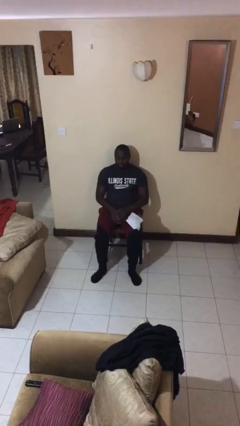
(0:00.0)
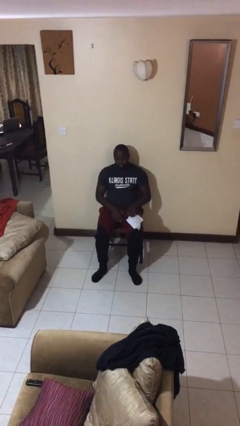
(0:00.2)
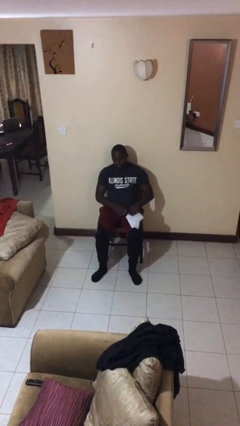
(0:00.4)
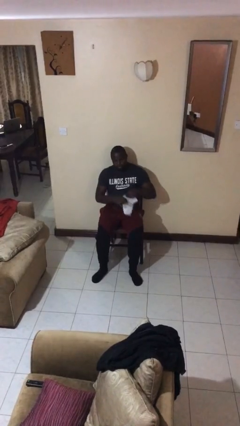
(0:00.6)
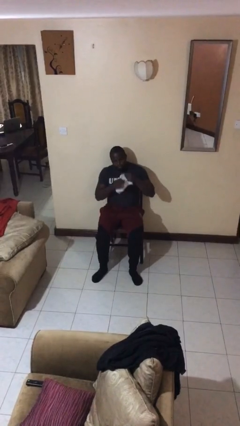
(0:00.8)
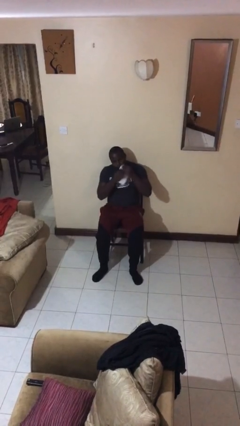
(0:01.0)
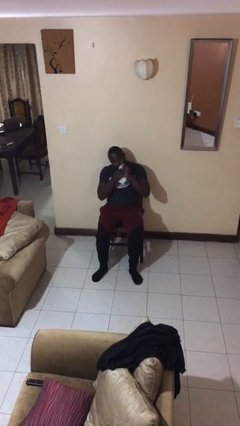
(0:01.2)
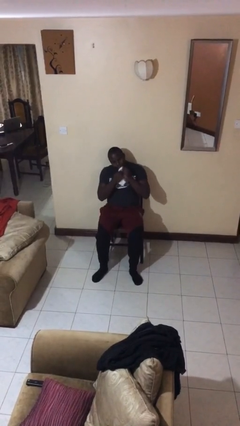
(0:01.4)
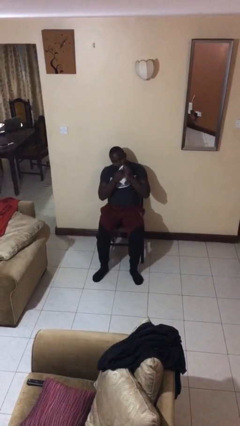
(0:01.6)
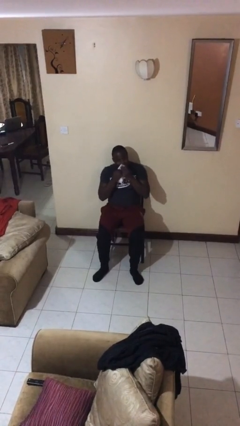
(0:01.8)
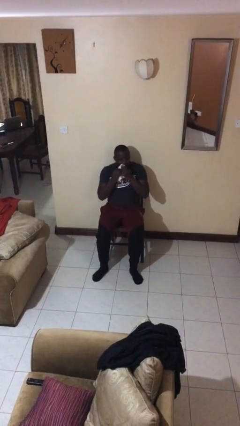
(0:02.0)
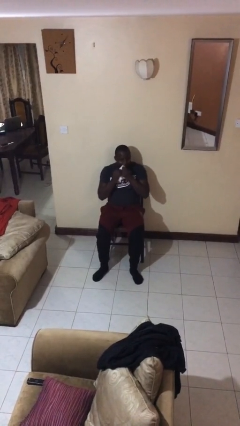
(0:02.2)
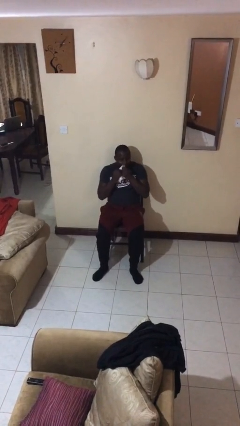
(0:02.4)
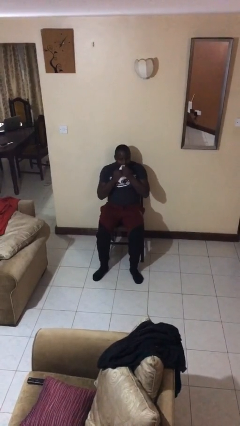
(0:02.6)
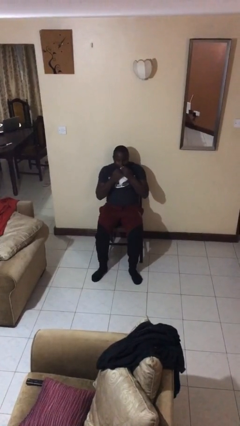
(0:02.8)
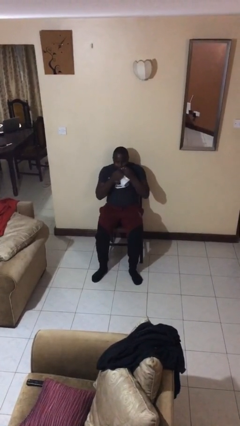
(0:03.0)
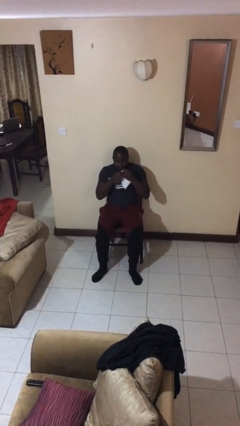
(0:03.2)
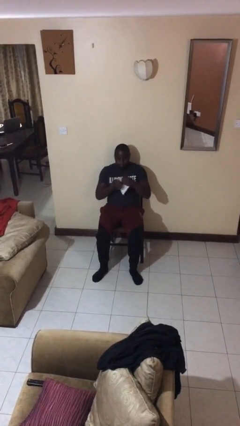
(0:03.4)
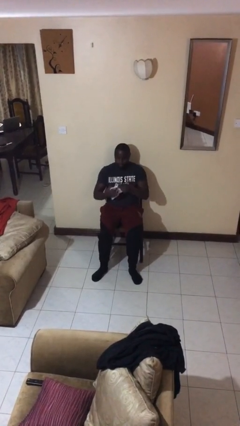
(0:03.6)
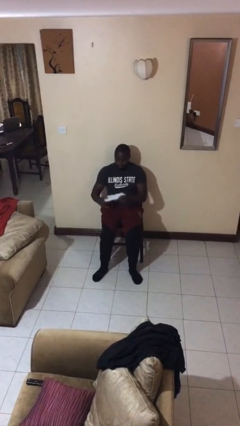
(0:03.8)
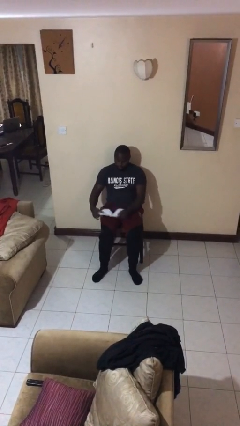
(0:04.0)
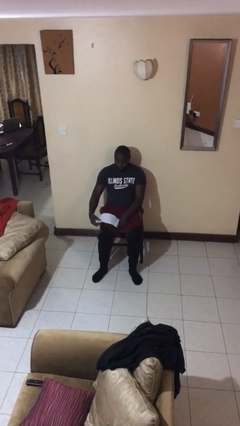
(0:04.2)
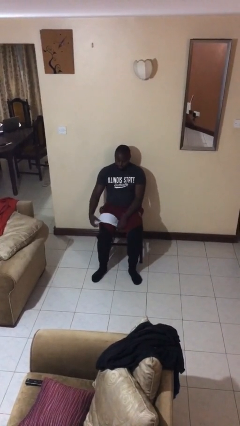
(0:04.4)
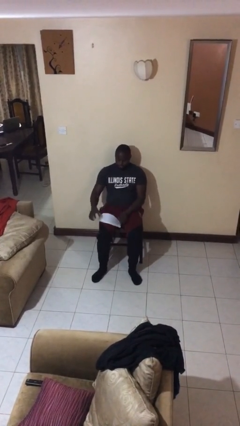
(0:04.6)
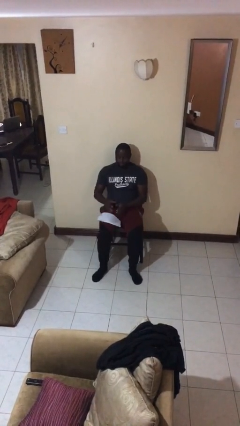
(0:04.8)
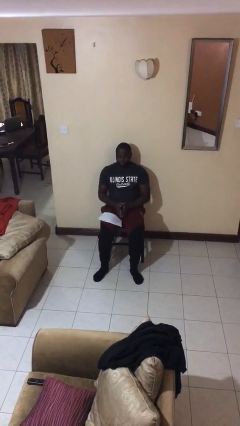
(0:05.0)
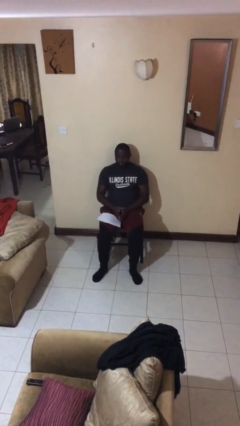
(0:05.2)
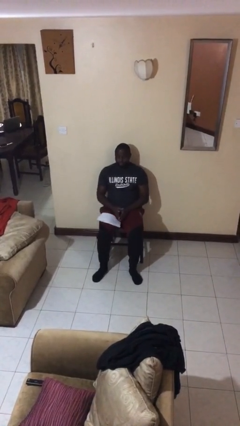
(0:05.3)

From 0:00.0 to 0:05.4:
person wipes mouth with napkin

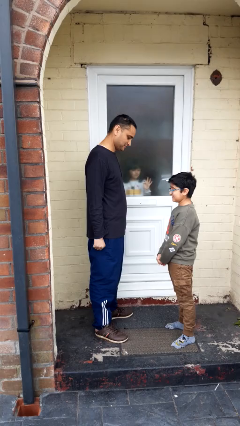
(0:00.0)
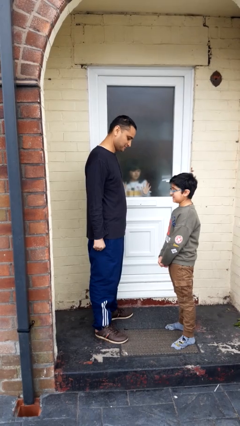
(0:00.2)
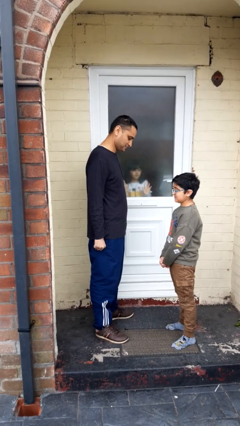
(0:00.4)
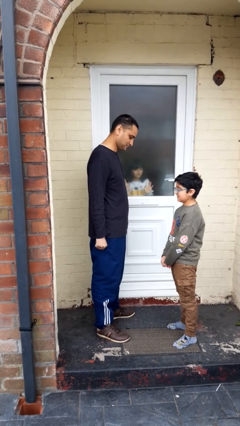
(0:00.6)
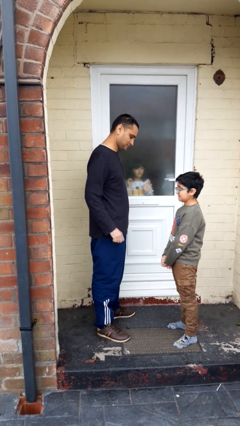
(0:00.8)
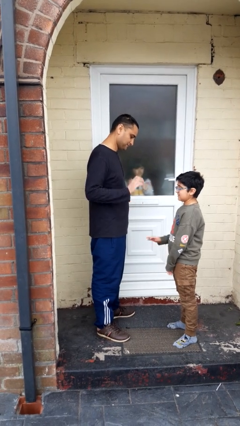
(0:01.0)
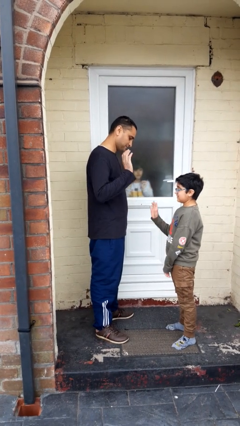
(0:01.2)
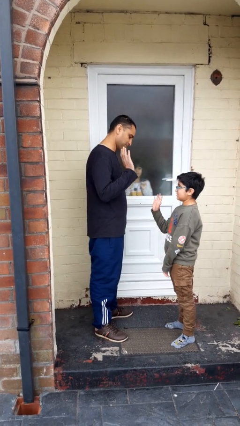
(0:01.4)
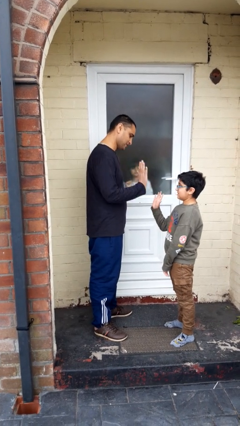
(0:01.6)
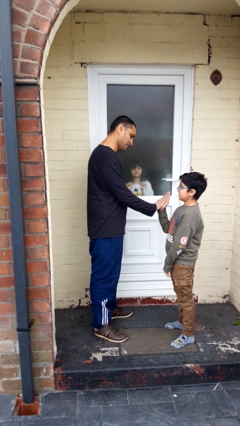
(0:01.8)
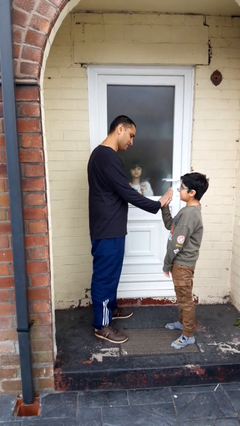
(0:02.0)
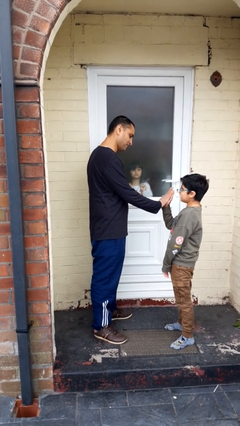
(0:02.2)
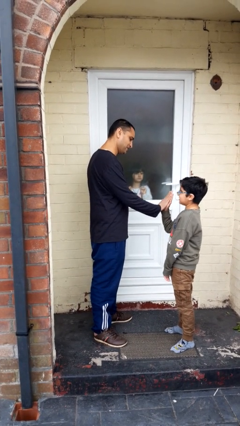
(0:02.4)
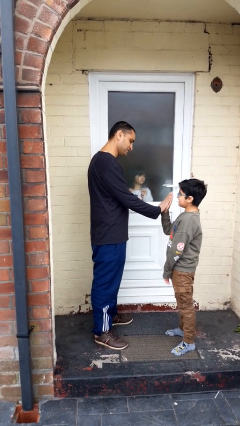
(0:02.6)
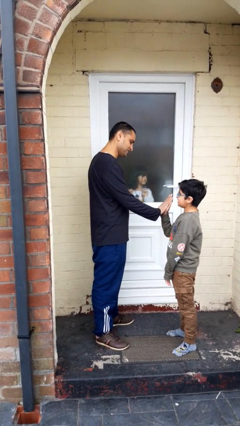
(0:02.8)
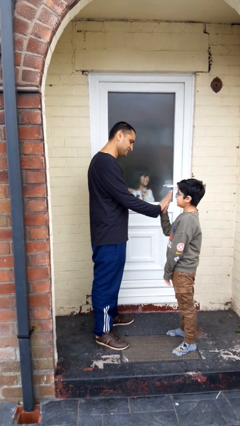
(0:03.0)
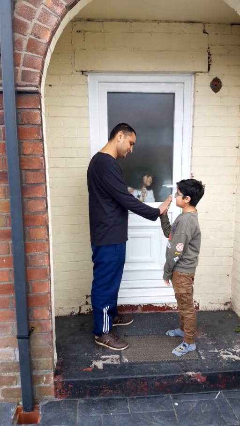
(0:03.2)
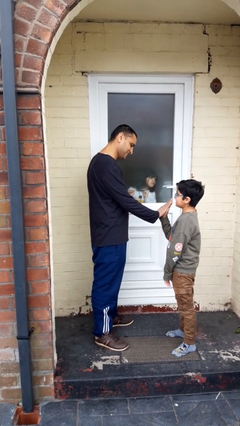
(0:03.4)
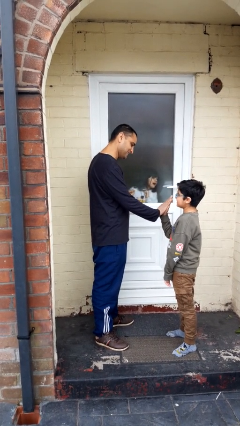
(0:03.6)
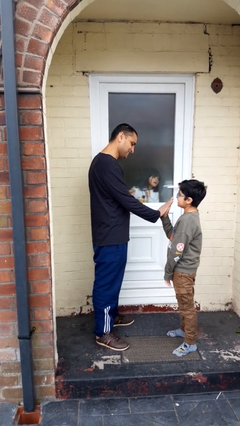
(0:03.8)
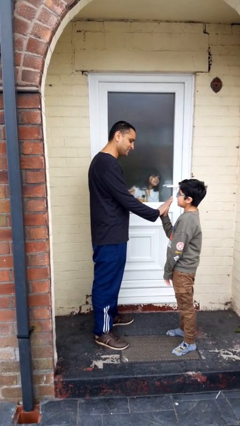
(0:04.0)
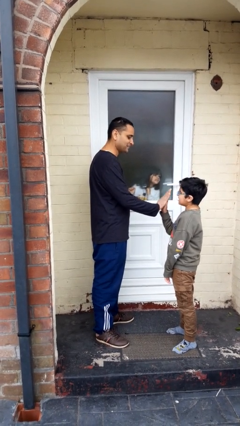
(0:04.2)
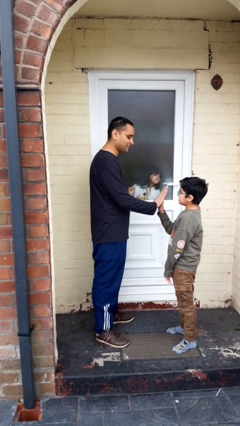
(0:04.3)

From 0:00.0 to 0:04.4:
person highfives hand

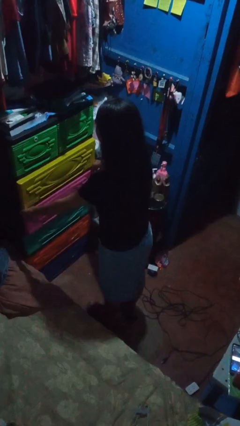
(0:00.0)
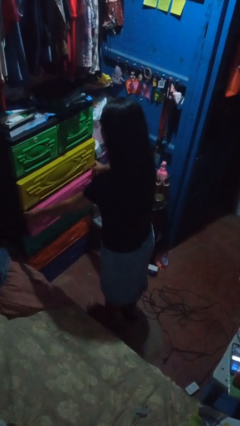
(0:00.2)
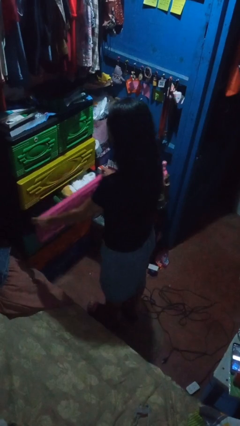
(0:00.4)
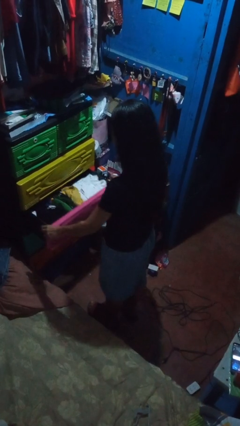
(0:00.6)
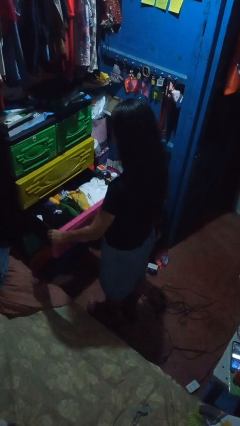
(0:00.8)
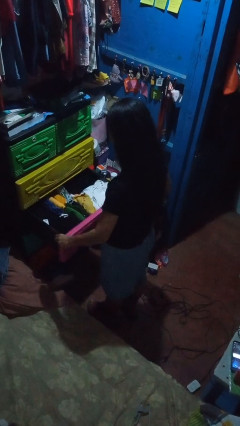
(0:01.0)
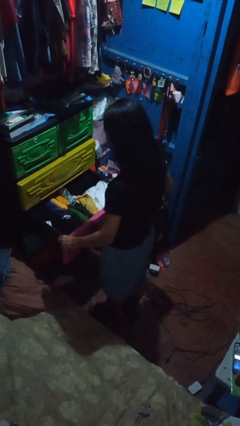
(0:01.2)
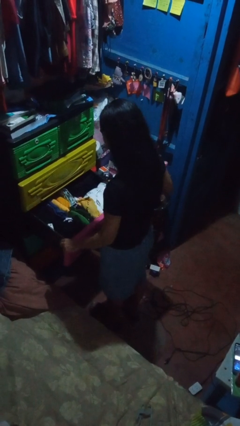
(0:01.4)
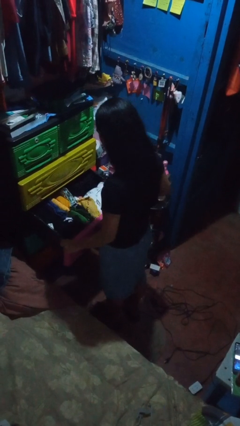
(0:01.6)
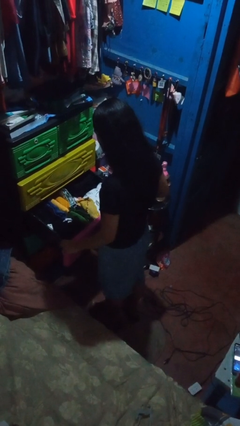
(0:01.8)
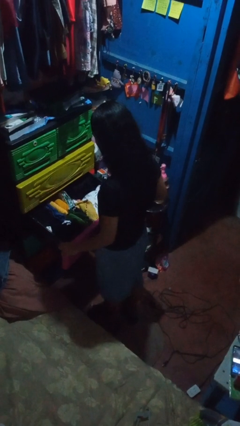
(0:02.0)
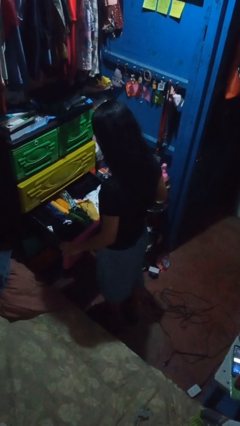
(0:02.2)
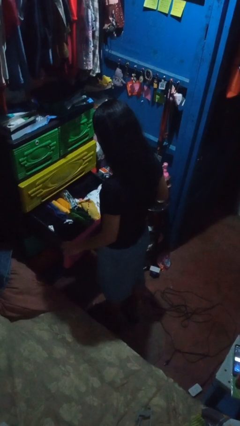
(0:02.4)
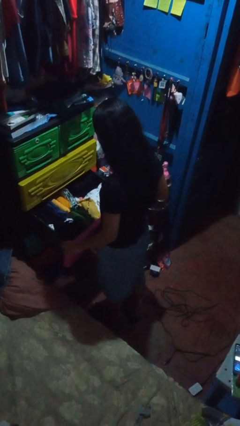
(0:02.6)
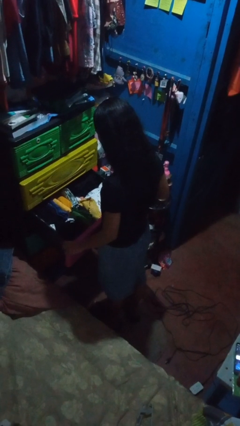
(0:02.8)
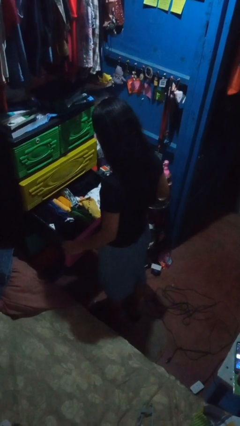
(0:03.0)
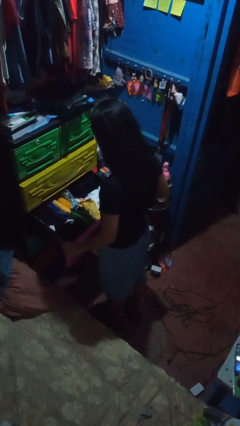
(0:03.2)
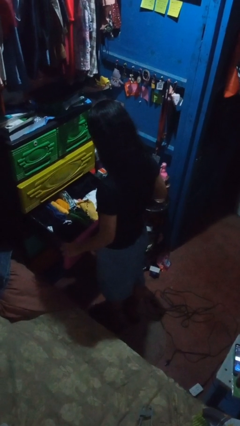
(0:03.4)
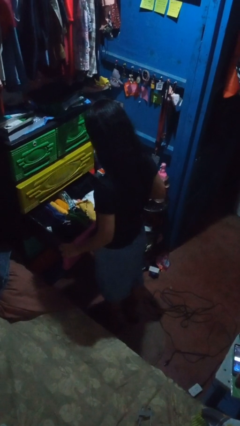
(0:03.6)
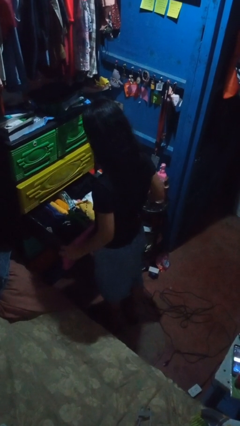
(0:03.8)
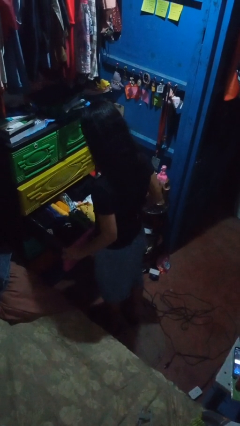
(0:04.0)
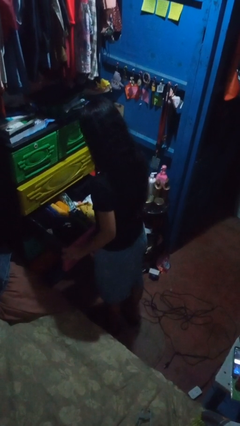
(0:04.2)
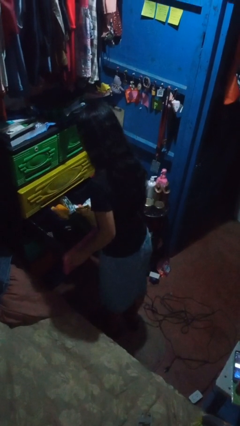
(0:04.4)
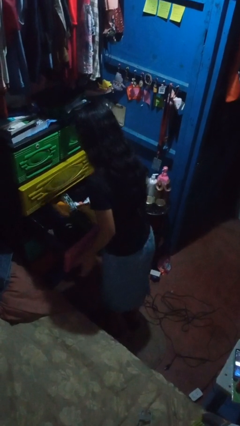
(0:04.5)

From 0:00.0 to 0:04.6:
person opens dresser drawer

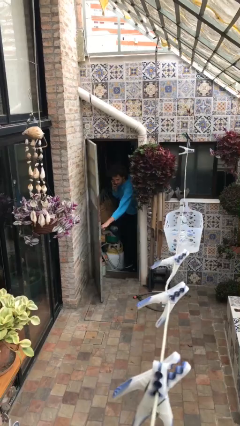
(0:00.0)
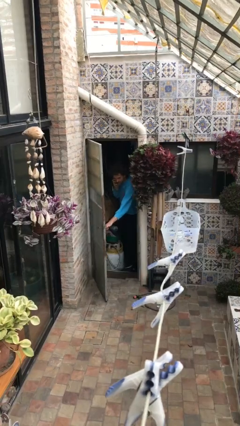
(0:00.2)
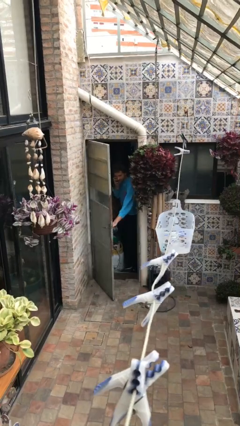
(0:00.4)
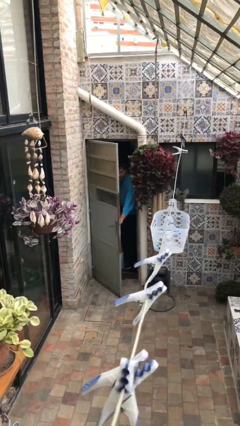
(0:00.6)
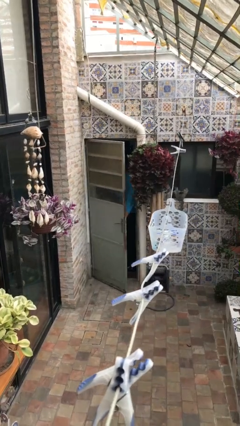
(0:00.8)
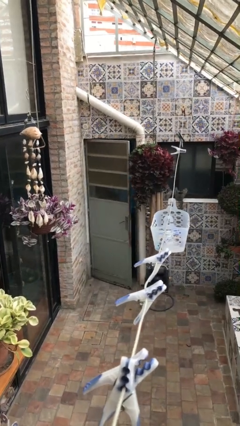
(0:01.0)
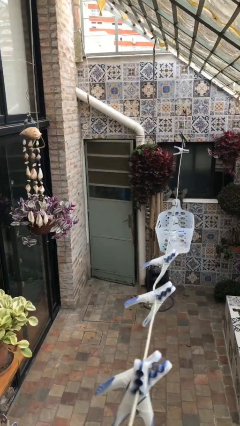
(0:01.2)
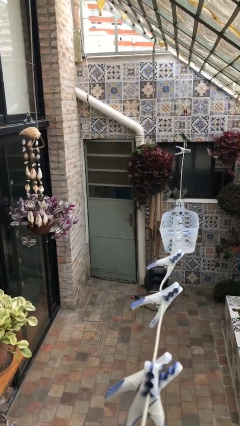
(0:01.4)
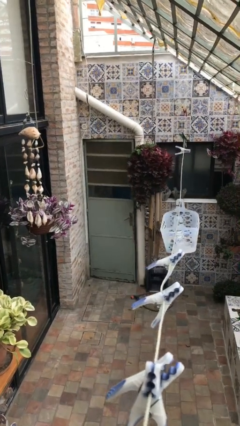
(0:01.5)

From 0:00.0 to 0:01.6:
person closes facility door

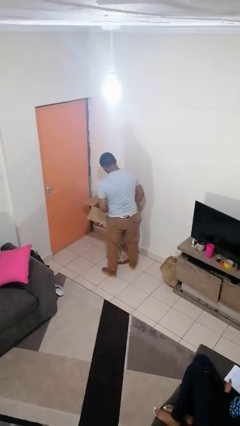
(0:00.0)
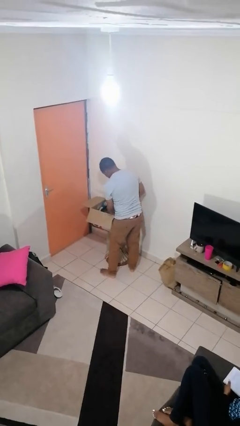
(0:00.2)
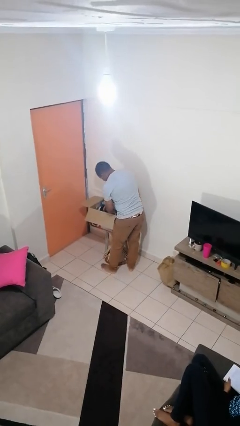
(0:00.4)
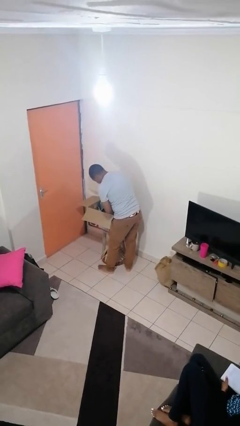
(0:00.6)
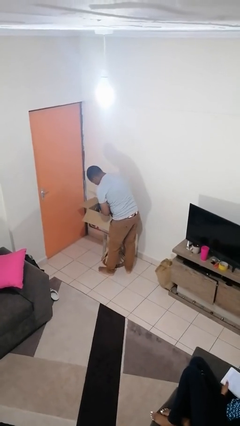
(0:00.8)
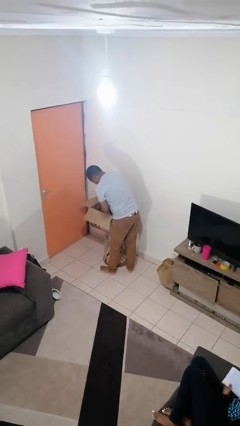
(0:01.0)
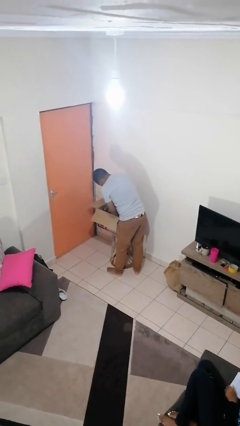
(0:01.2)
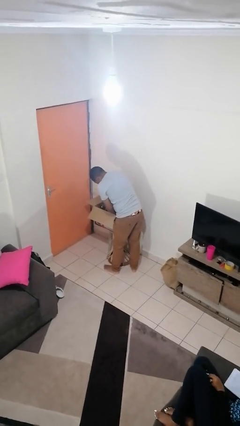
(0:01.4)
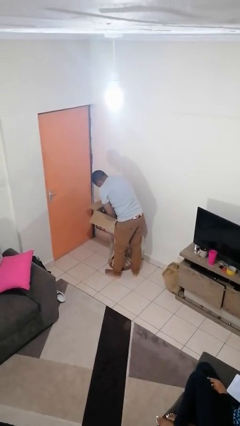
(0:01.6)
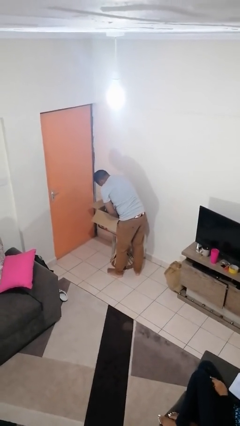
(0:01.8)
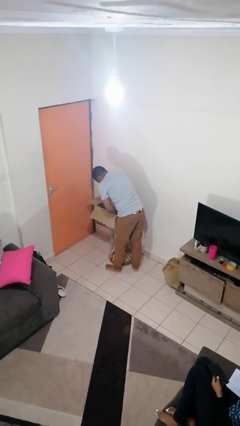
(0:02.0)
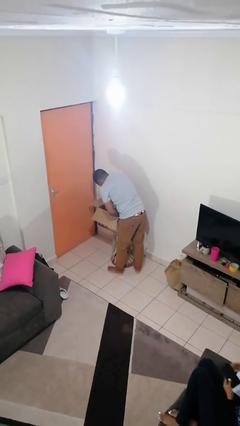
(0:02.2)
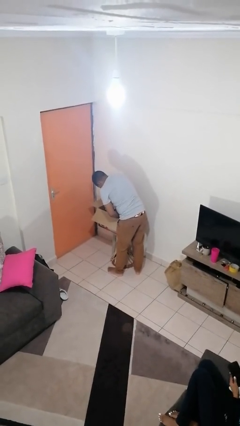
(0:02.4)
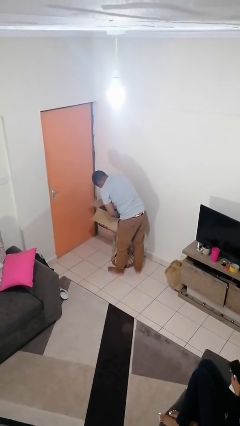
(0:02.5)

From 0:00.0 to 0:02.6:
person searches in box
